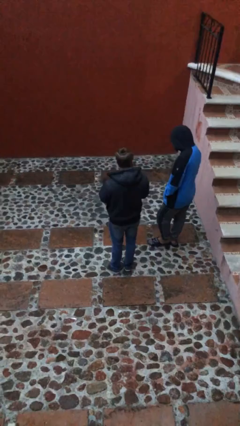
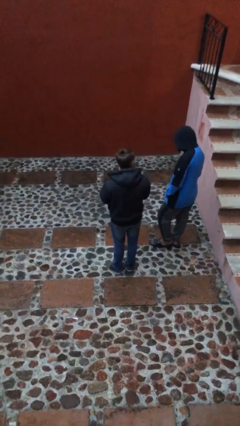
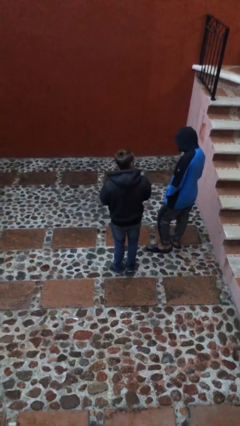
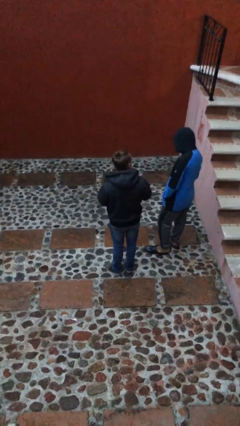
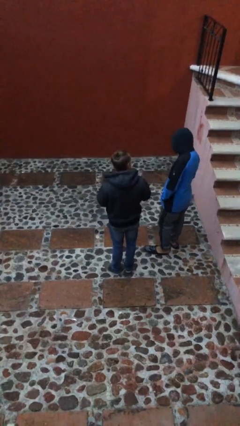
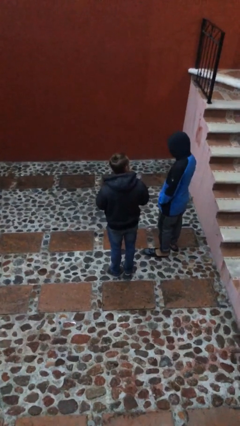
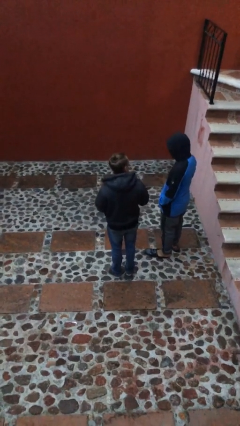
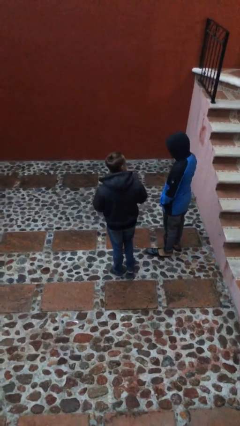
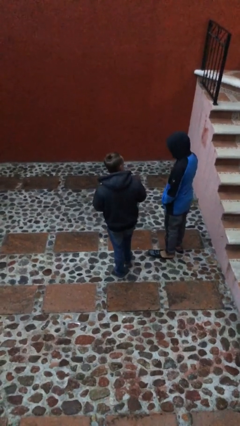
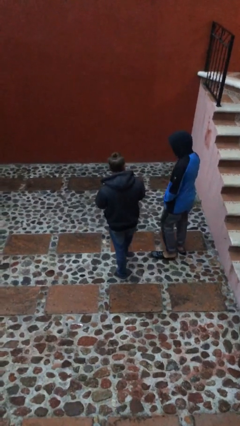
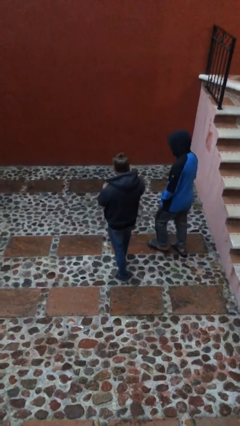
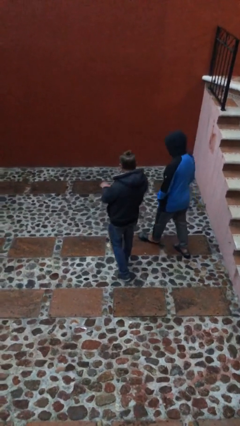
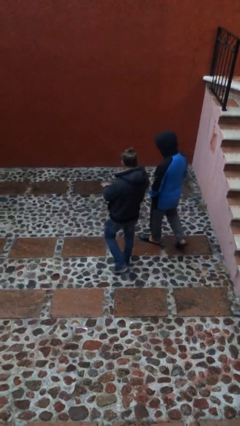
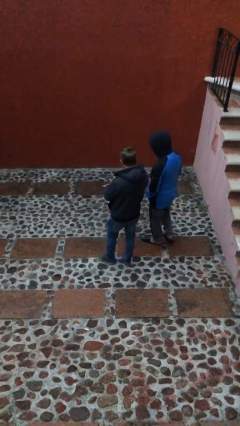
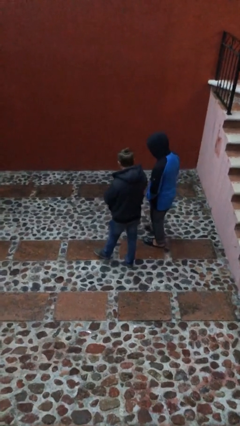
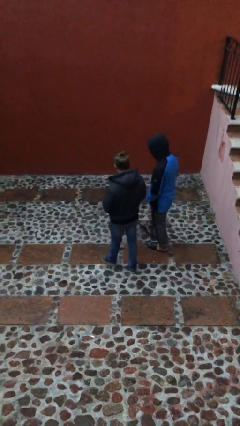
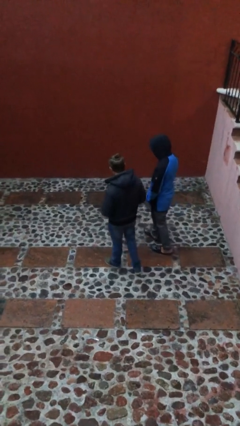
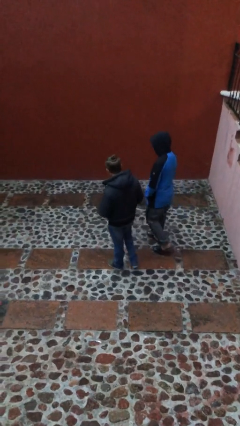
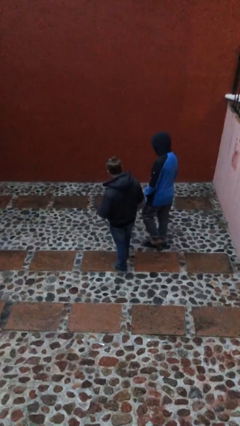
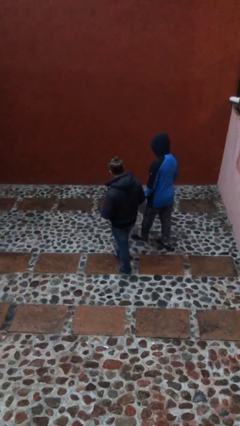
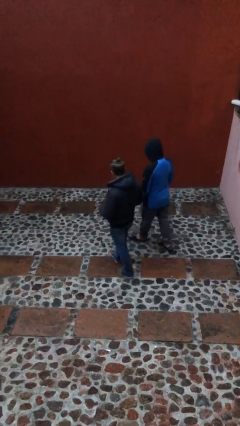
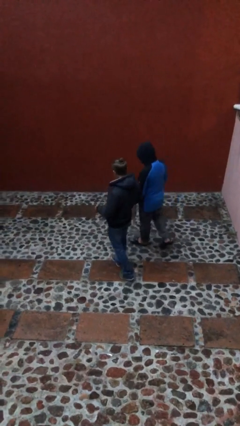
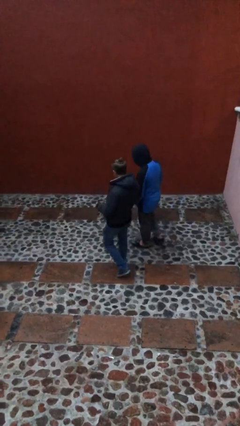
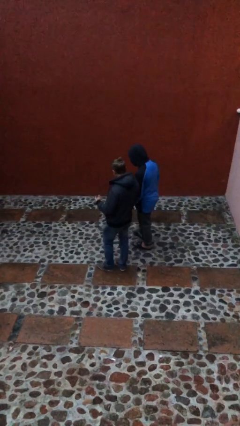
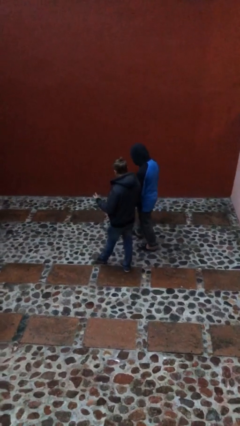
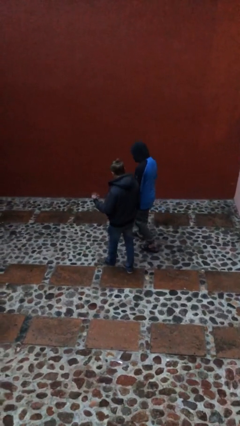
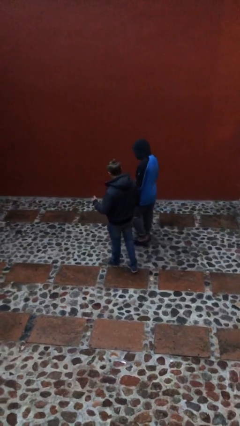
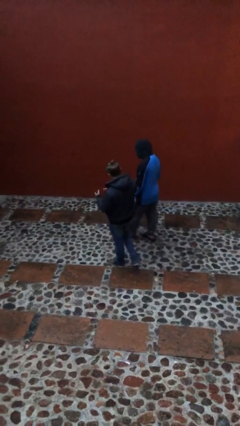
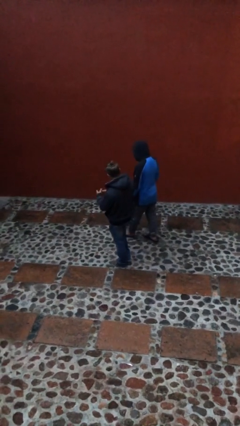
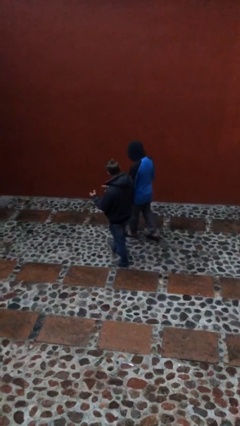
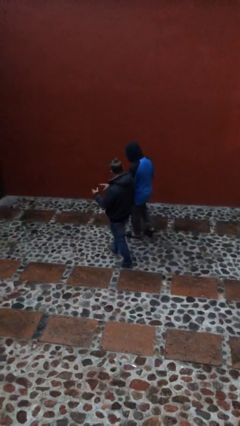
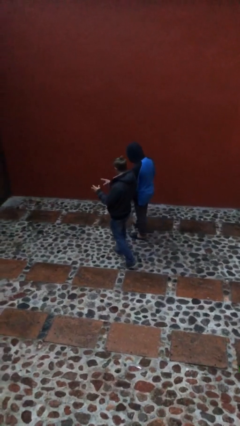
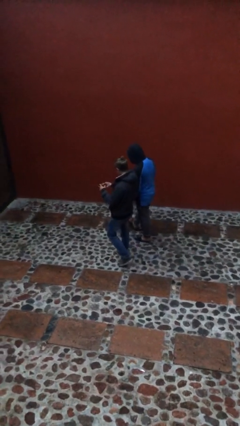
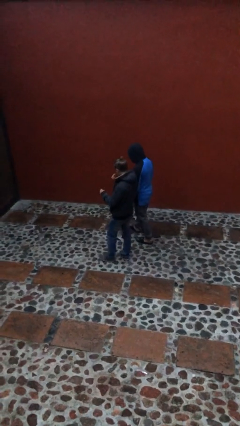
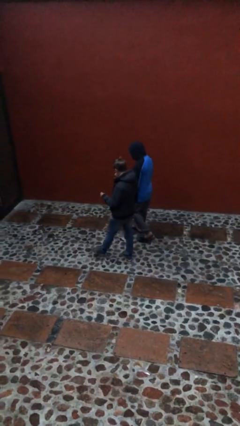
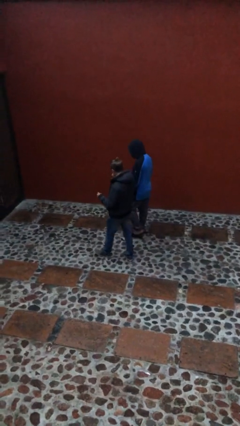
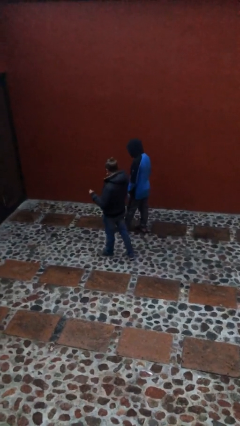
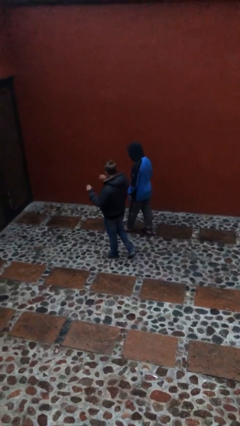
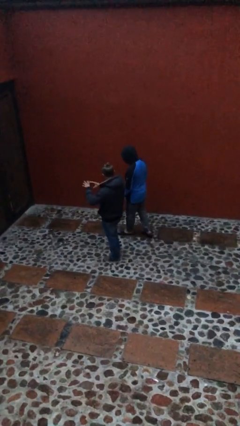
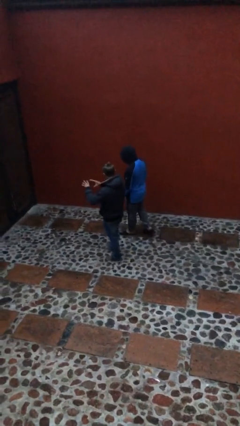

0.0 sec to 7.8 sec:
person talks to person

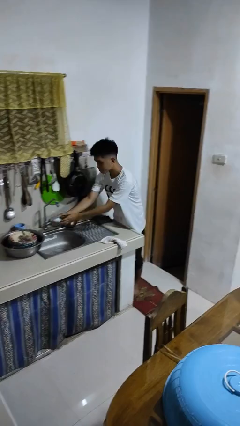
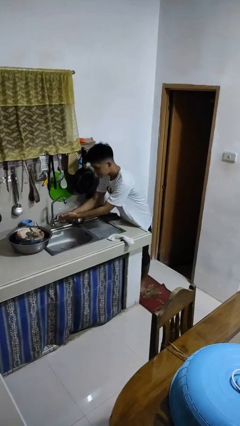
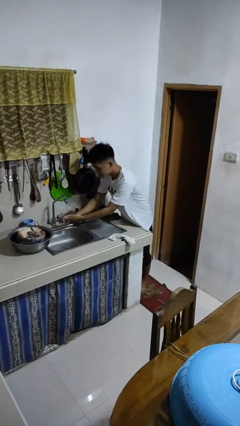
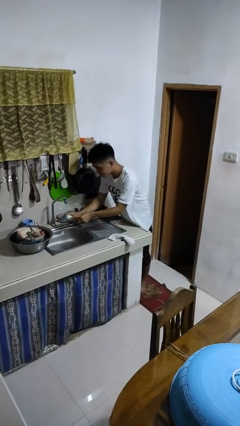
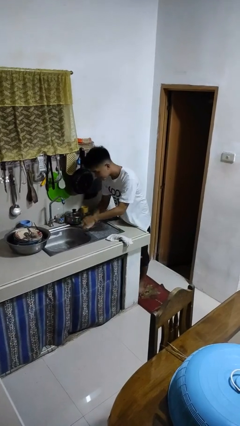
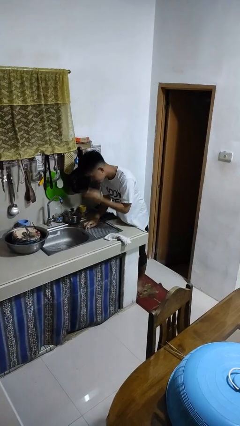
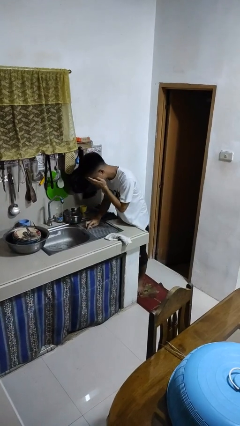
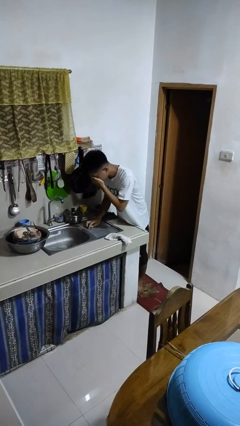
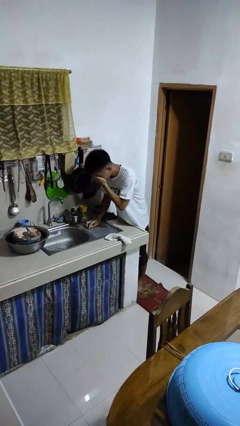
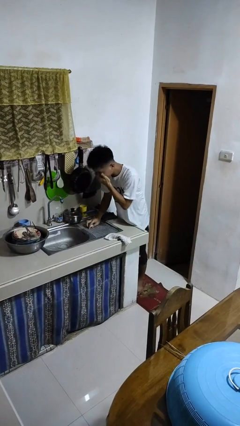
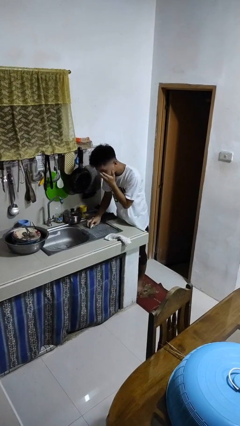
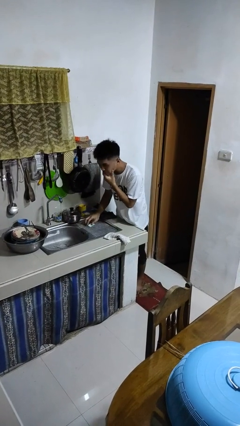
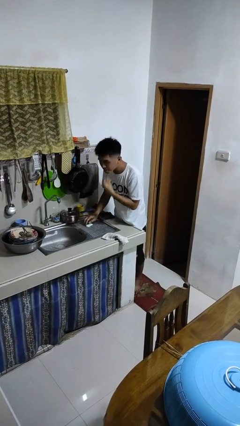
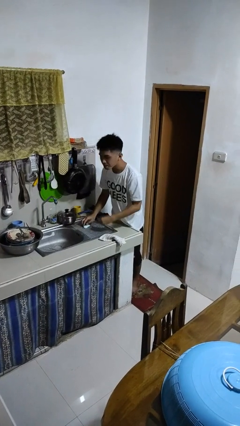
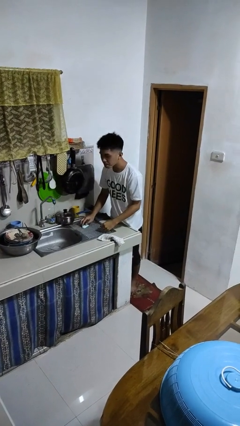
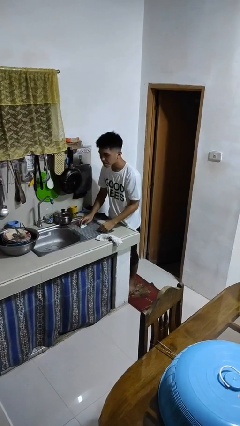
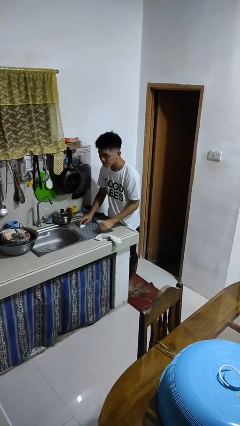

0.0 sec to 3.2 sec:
person washes face

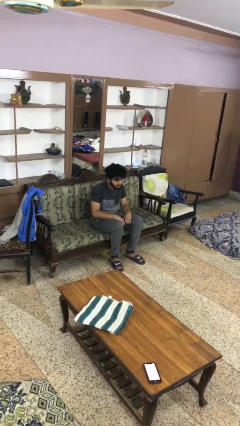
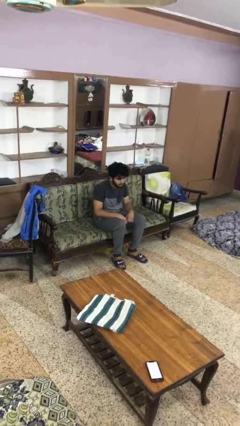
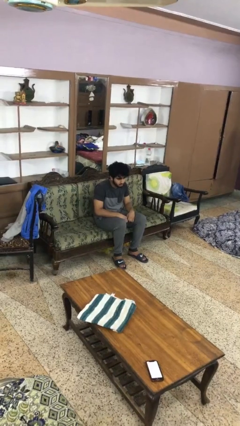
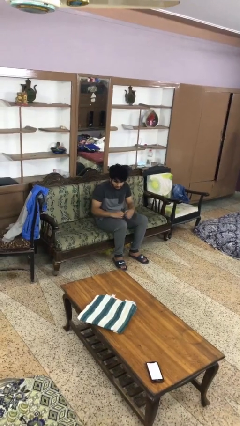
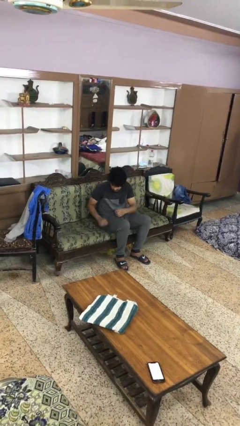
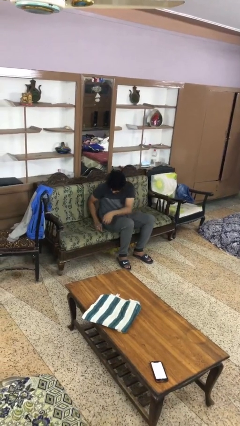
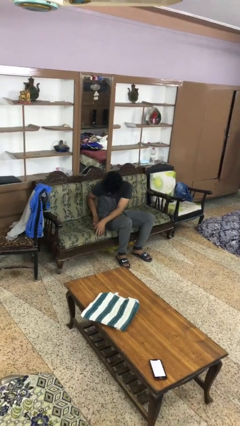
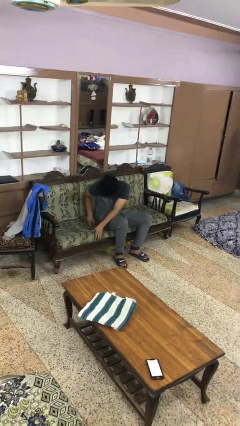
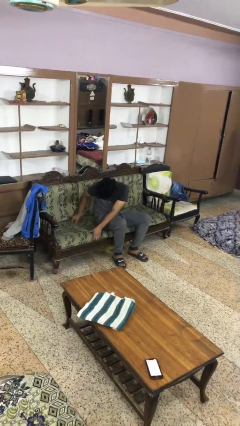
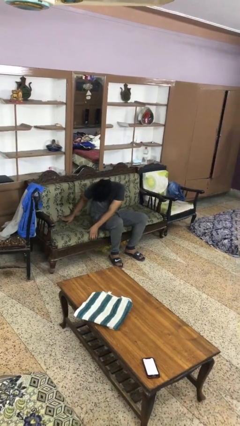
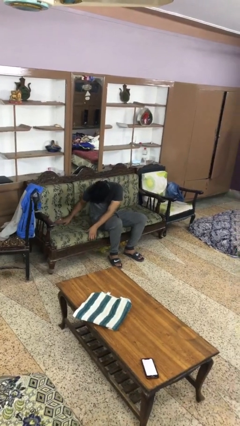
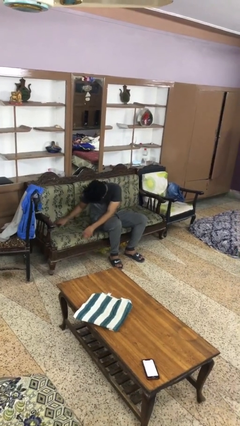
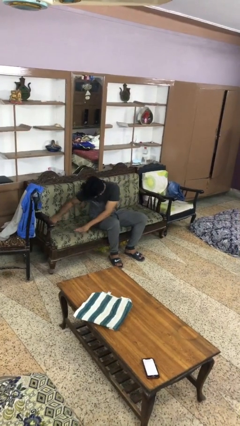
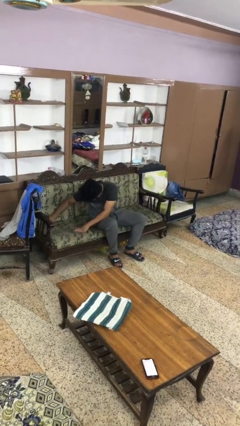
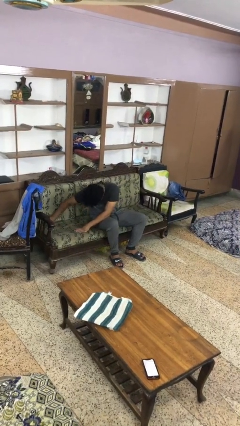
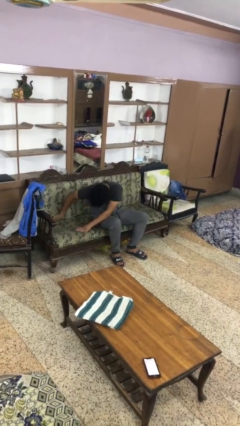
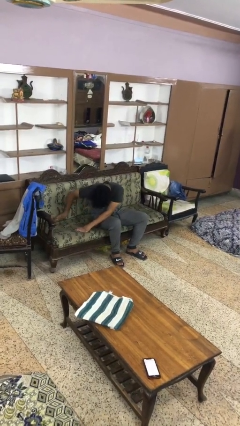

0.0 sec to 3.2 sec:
person searches in couch

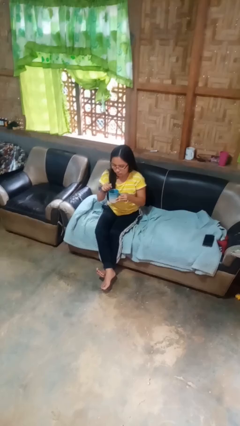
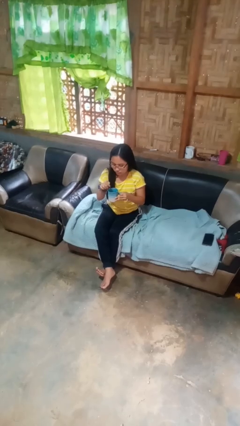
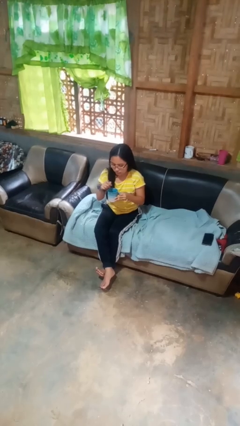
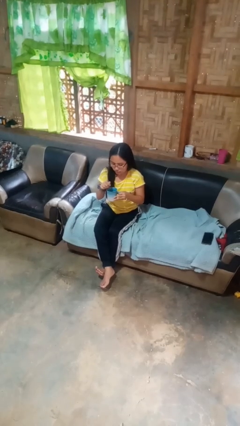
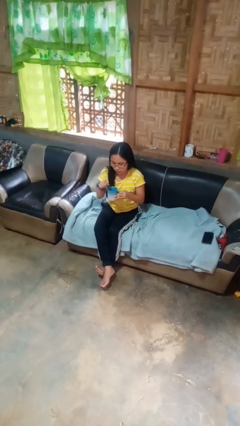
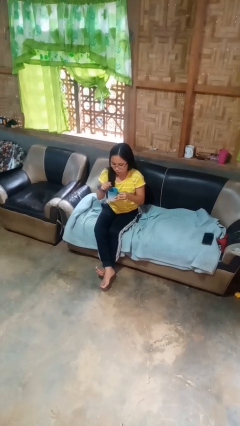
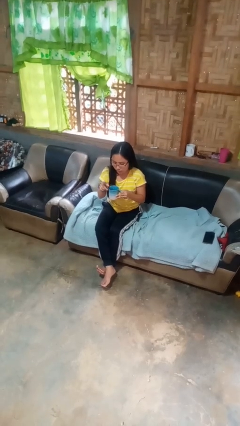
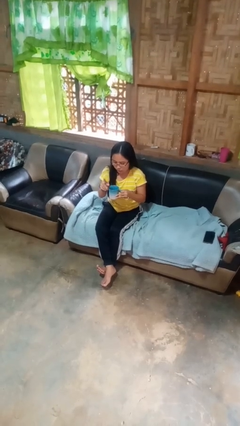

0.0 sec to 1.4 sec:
person stirs mug

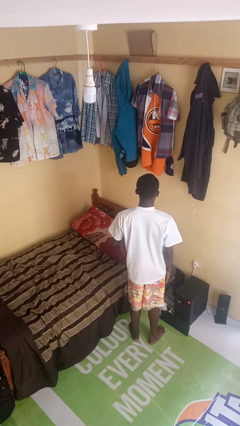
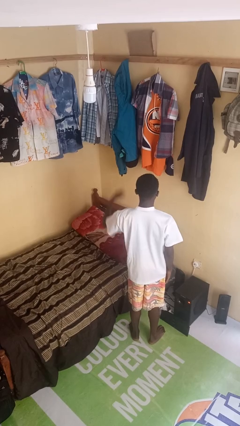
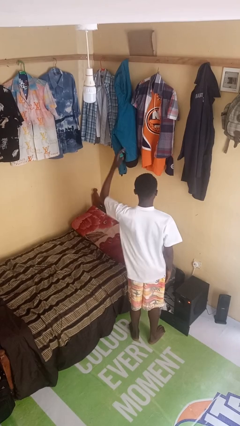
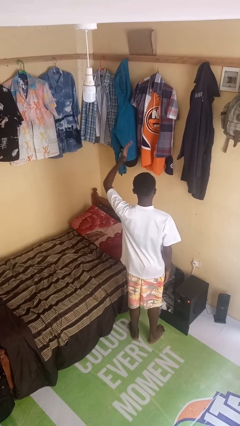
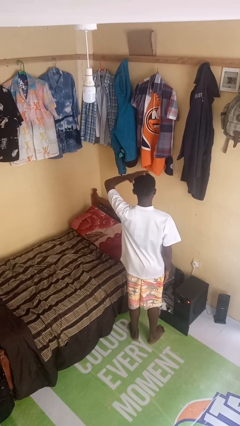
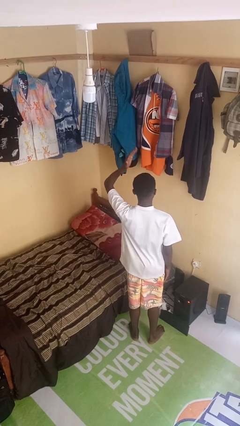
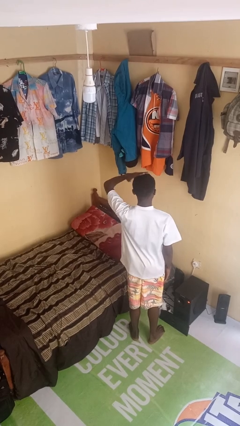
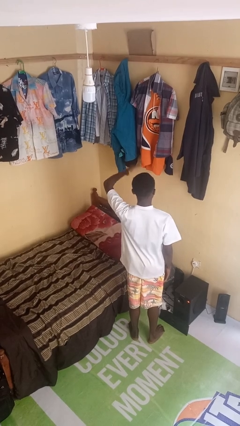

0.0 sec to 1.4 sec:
person pats head

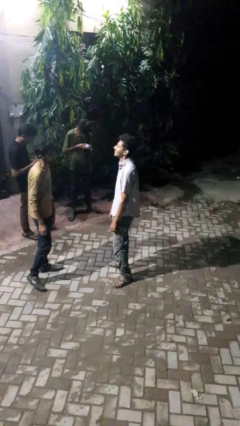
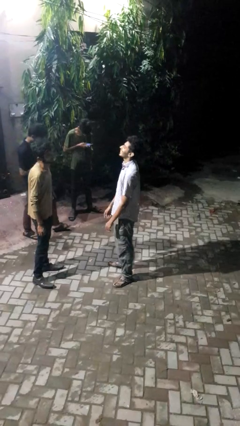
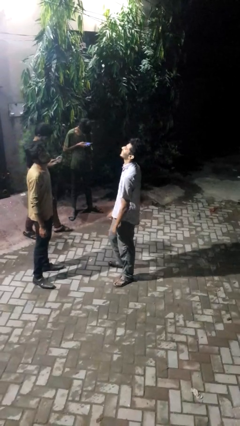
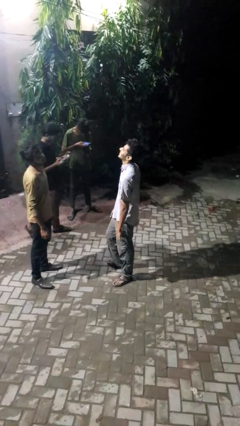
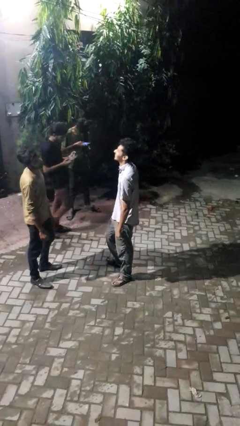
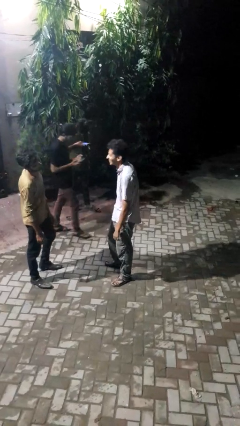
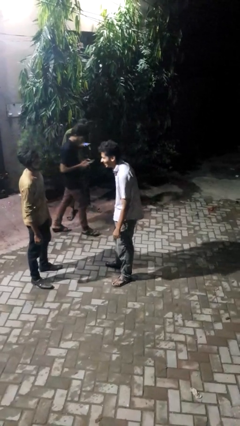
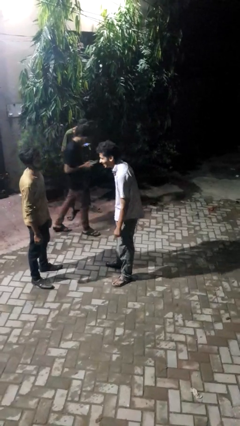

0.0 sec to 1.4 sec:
person laughs with person
